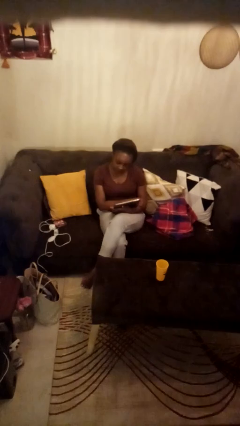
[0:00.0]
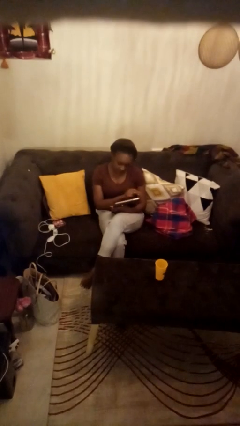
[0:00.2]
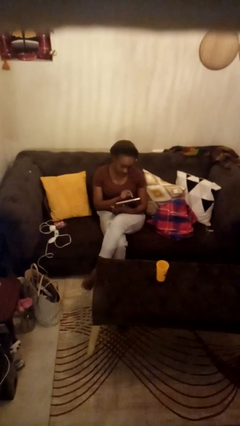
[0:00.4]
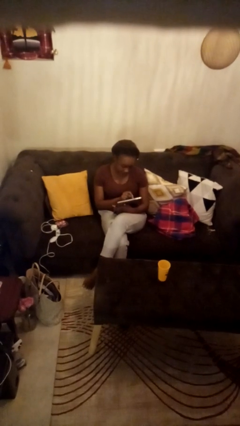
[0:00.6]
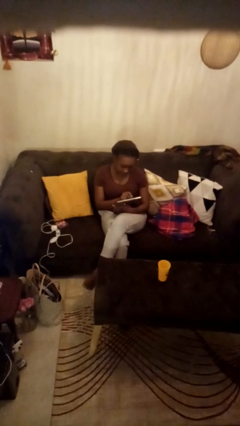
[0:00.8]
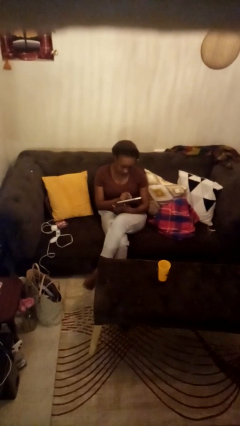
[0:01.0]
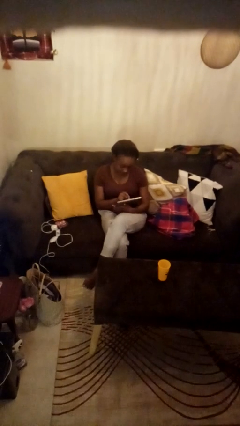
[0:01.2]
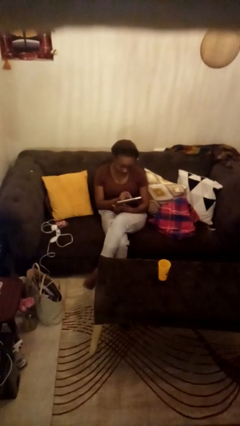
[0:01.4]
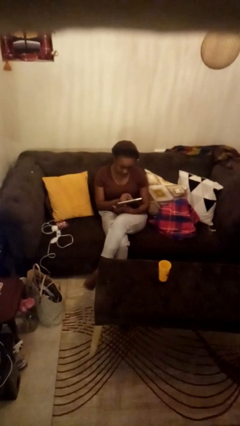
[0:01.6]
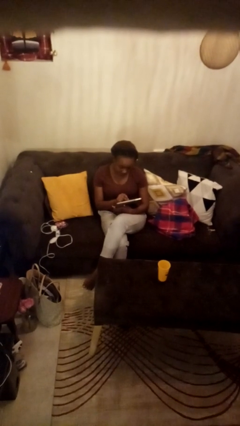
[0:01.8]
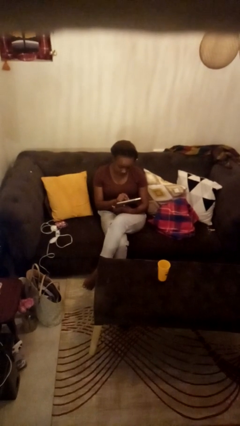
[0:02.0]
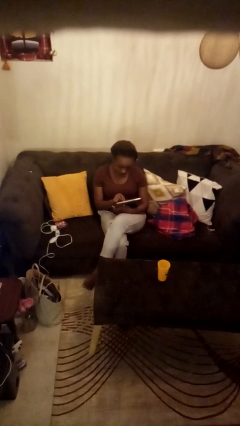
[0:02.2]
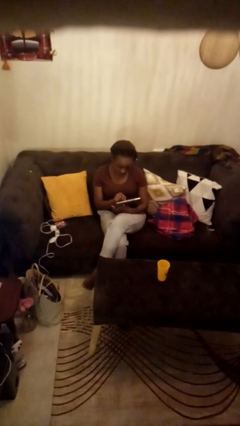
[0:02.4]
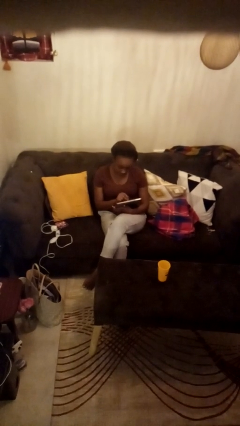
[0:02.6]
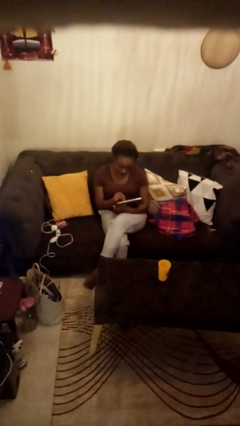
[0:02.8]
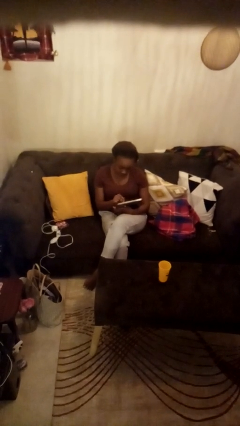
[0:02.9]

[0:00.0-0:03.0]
person interacts with tablet

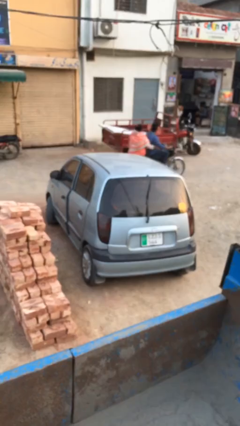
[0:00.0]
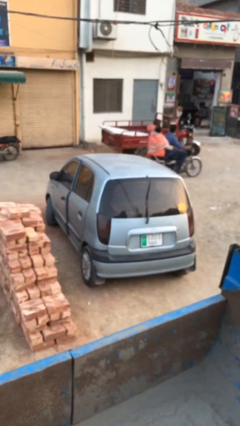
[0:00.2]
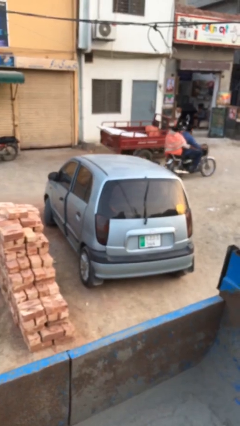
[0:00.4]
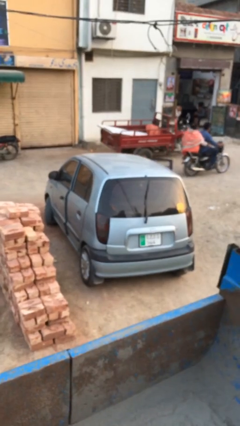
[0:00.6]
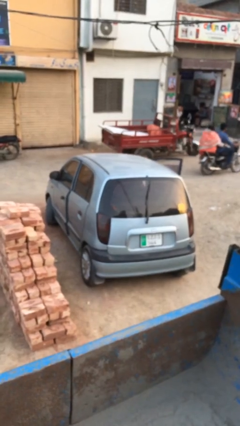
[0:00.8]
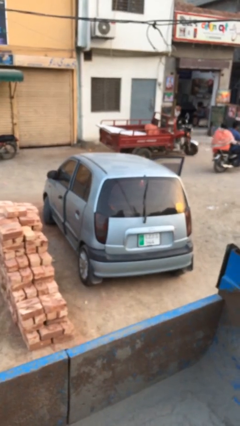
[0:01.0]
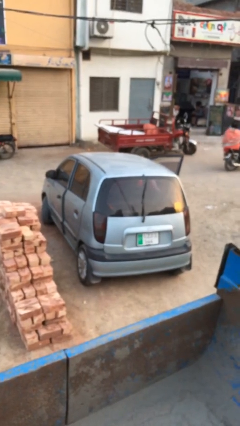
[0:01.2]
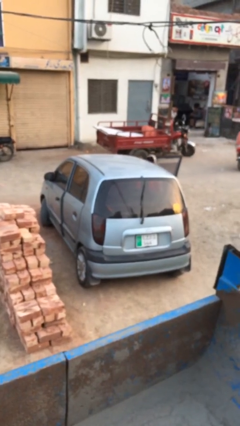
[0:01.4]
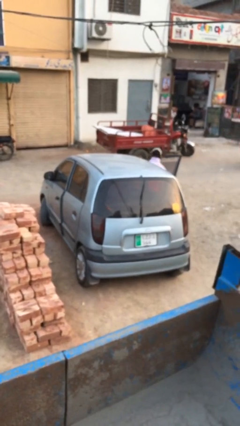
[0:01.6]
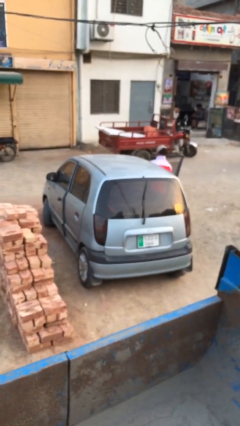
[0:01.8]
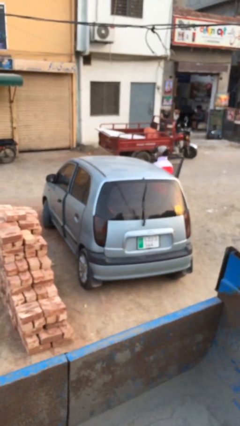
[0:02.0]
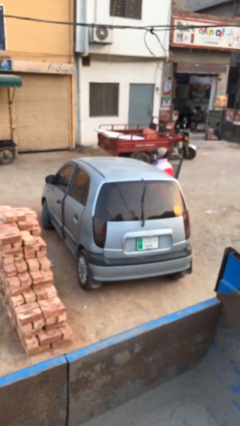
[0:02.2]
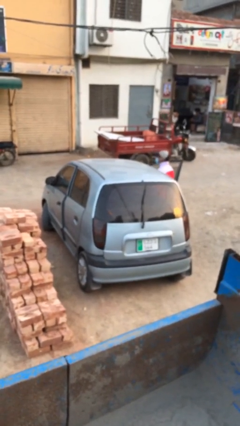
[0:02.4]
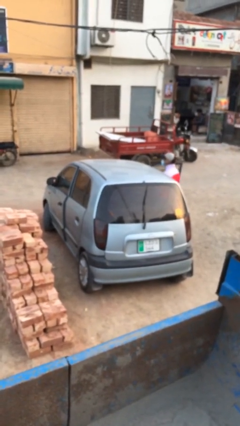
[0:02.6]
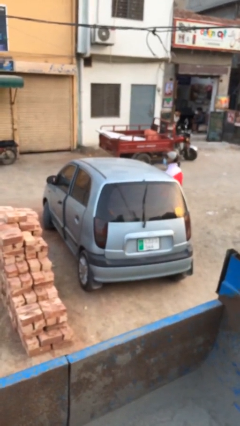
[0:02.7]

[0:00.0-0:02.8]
car drops off person

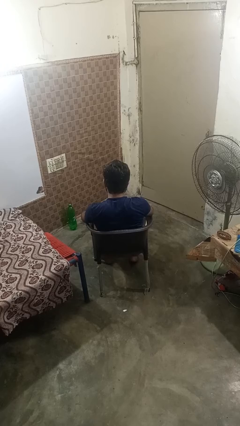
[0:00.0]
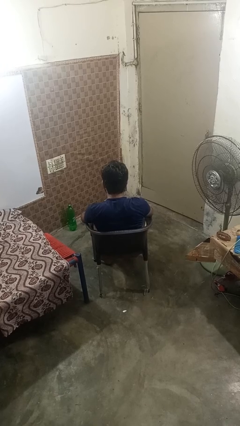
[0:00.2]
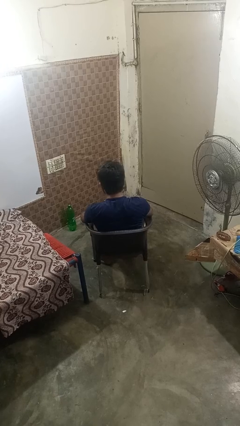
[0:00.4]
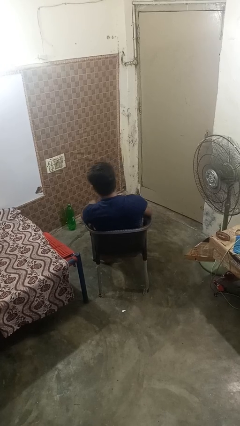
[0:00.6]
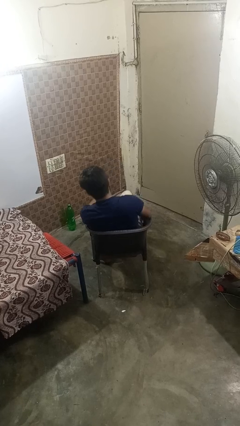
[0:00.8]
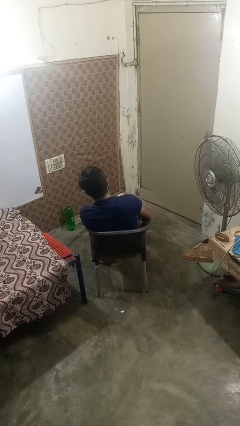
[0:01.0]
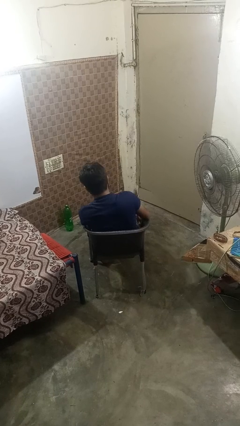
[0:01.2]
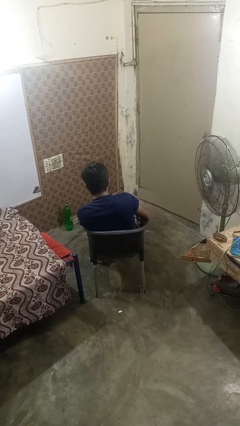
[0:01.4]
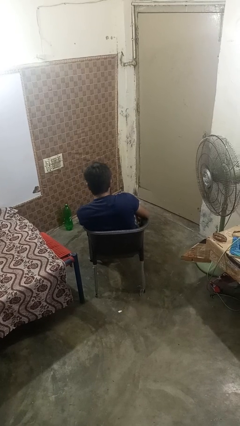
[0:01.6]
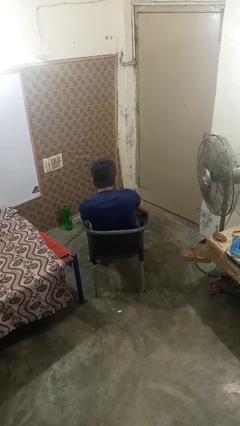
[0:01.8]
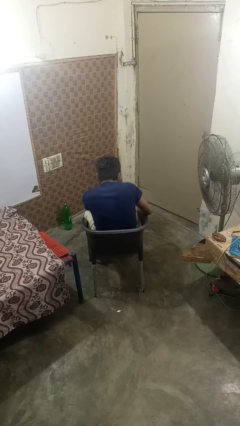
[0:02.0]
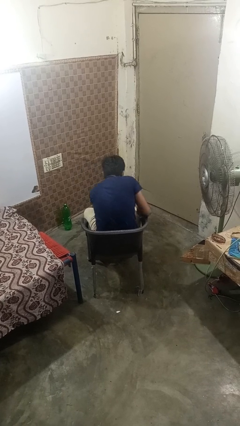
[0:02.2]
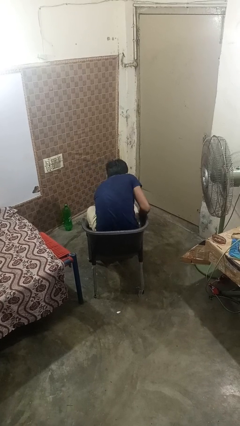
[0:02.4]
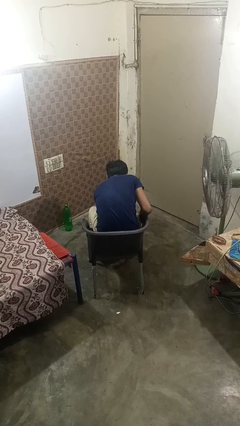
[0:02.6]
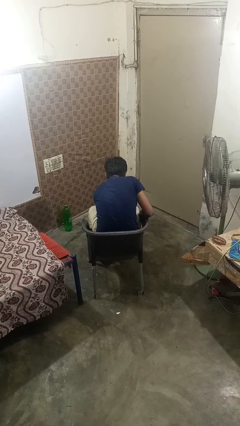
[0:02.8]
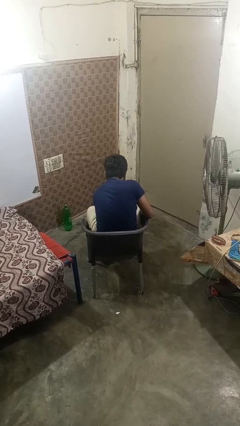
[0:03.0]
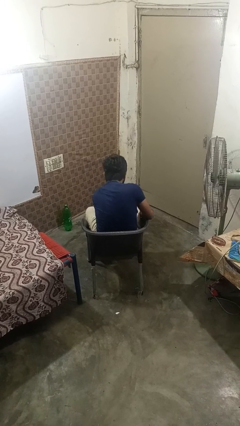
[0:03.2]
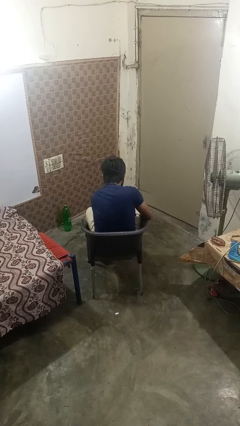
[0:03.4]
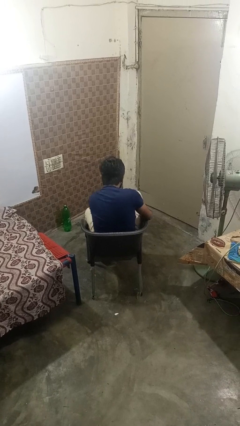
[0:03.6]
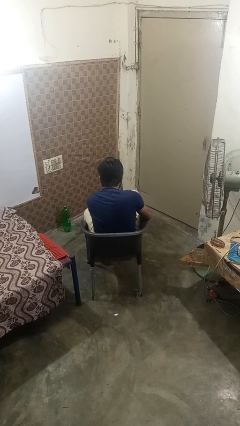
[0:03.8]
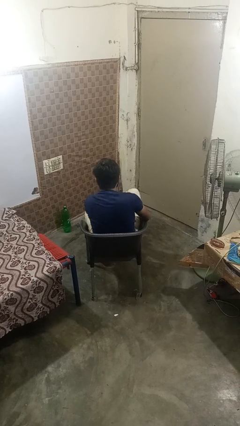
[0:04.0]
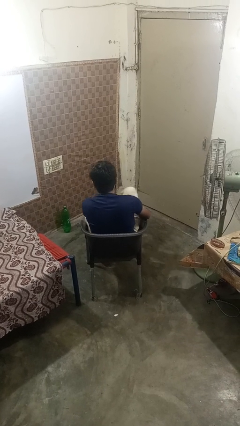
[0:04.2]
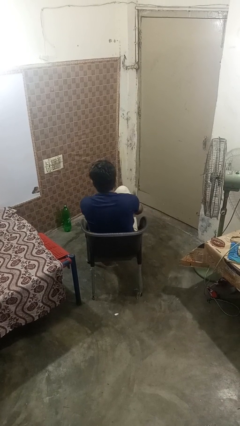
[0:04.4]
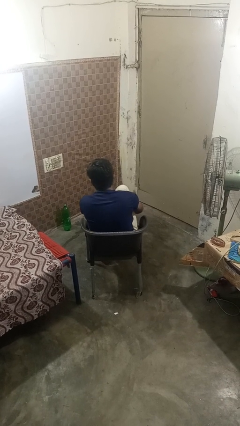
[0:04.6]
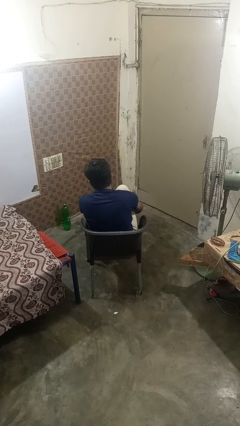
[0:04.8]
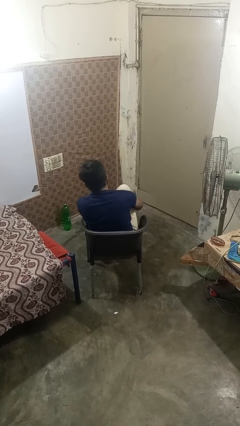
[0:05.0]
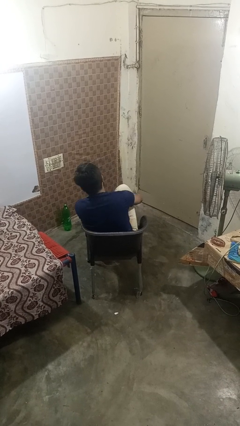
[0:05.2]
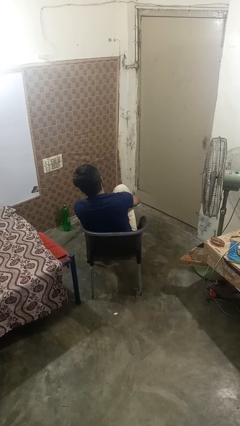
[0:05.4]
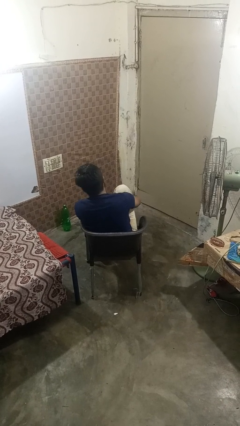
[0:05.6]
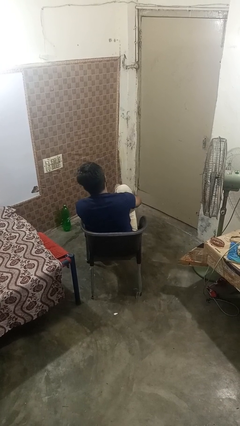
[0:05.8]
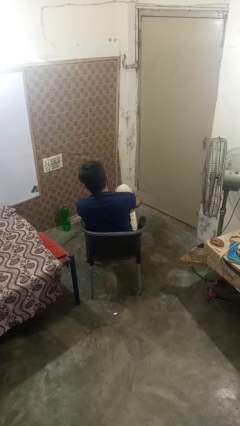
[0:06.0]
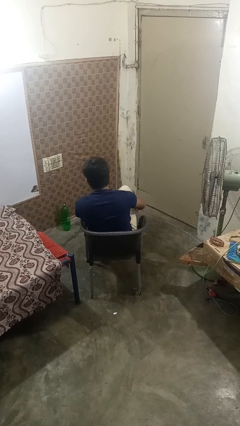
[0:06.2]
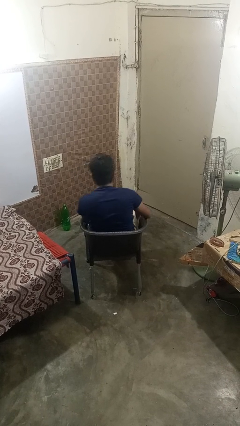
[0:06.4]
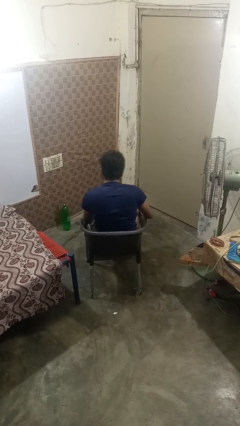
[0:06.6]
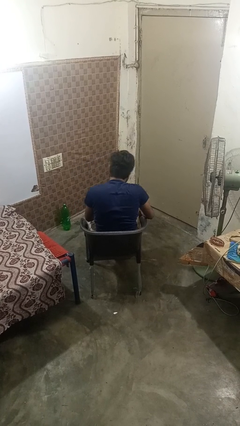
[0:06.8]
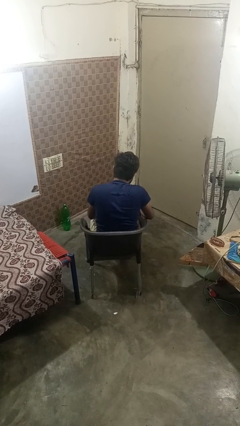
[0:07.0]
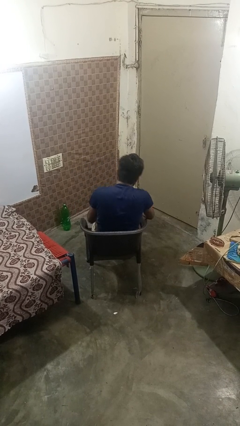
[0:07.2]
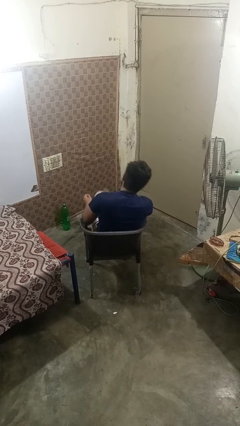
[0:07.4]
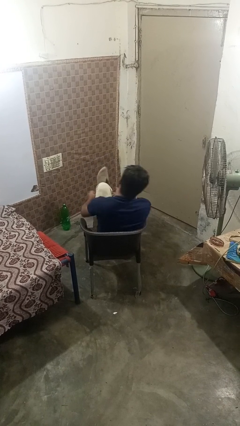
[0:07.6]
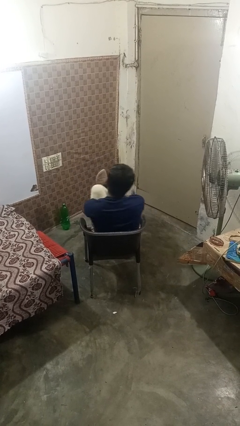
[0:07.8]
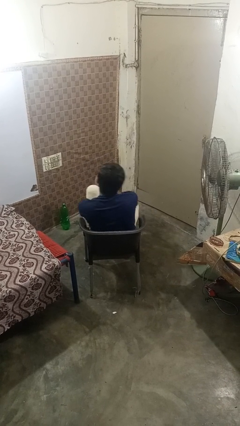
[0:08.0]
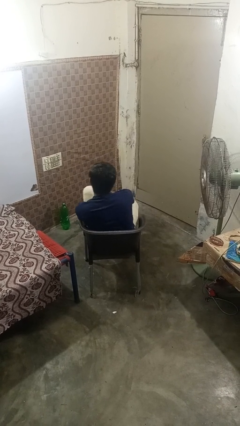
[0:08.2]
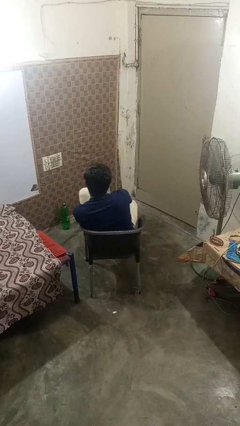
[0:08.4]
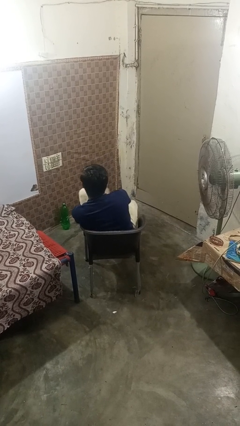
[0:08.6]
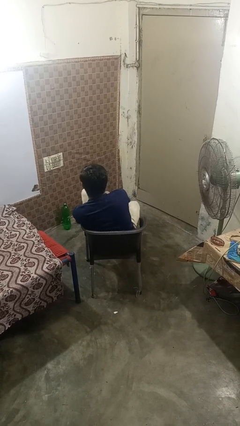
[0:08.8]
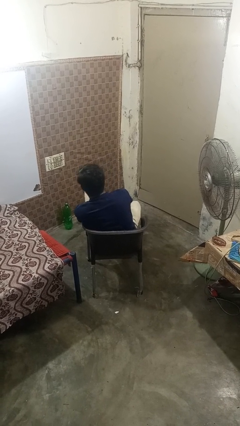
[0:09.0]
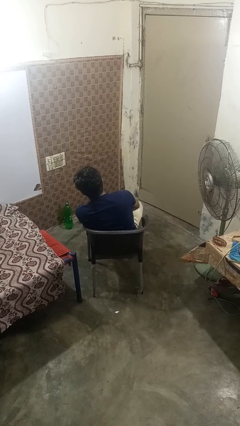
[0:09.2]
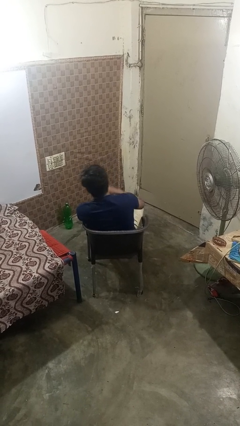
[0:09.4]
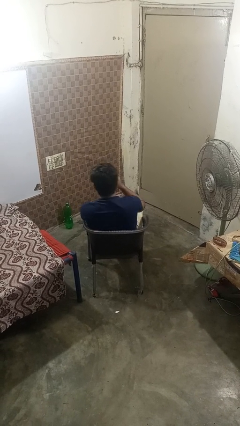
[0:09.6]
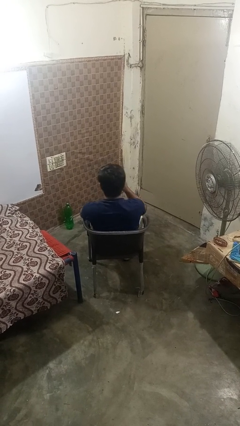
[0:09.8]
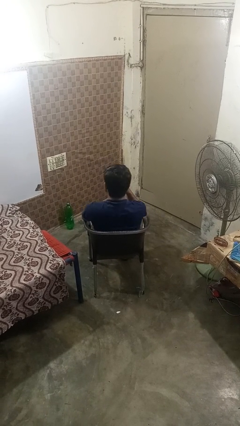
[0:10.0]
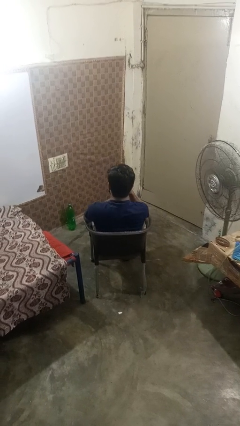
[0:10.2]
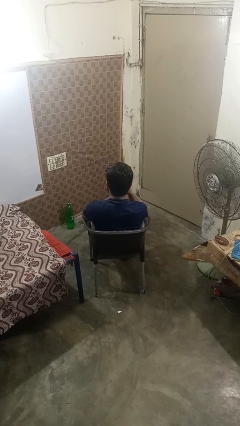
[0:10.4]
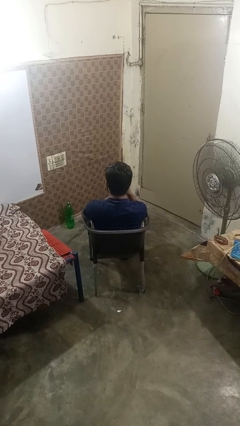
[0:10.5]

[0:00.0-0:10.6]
person puts on shoes

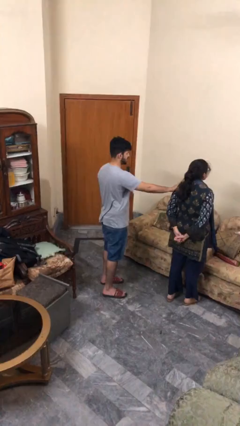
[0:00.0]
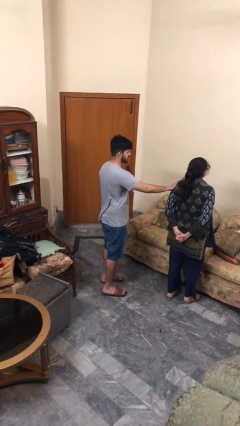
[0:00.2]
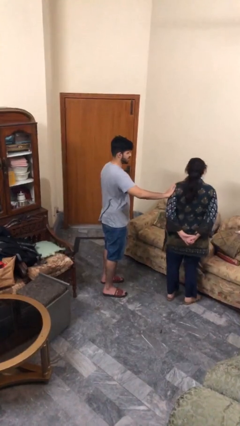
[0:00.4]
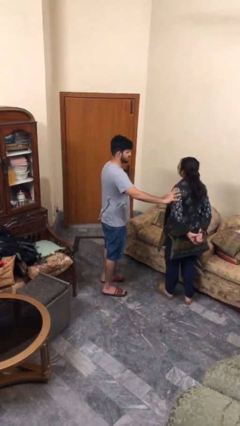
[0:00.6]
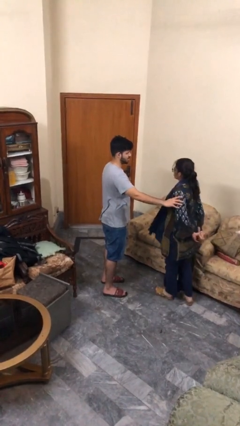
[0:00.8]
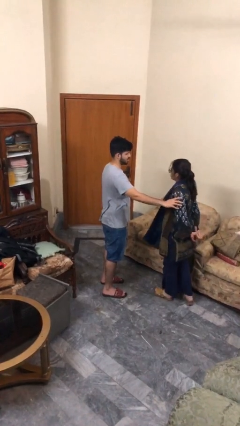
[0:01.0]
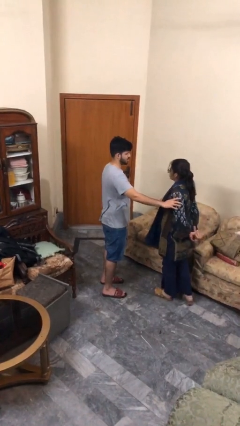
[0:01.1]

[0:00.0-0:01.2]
person spins person around
